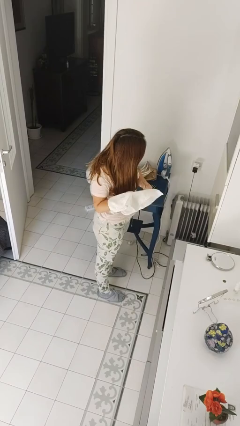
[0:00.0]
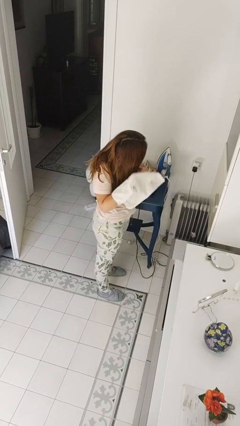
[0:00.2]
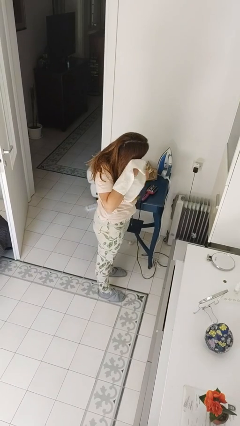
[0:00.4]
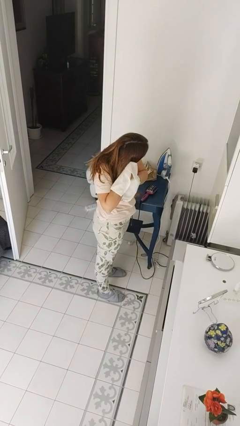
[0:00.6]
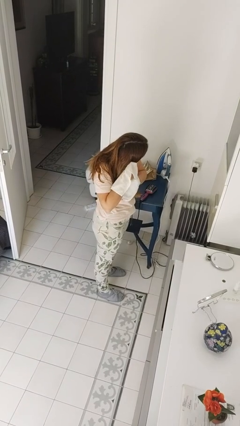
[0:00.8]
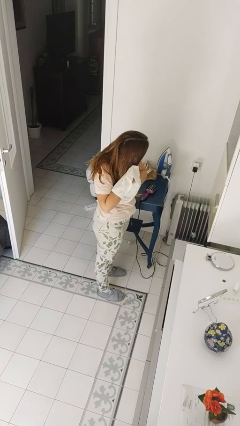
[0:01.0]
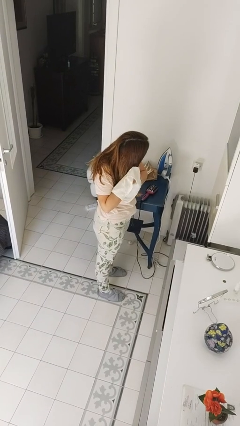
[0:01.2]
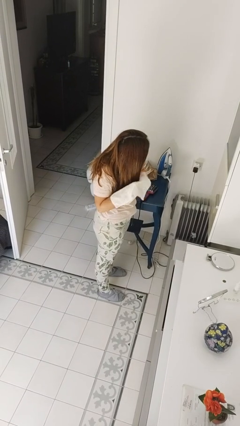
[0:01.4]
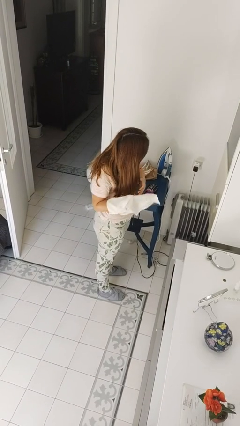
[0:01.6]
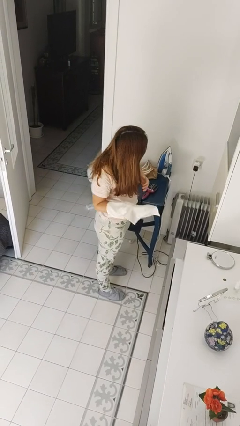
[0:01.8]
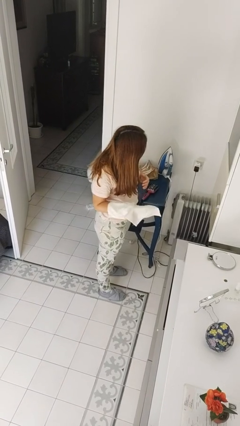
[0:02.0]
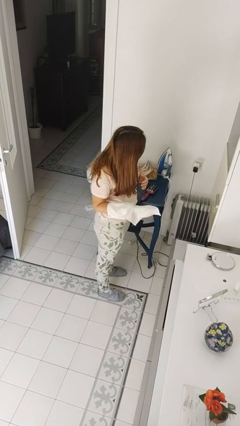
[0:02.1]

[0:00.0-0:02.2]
person dries hair with towel

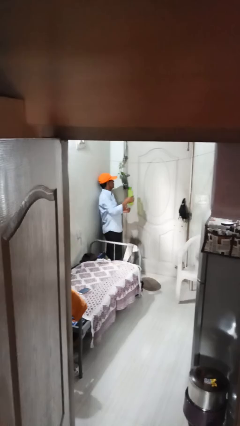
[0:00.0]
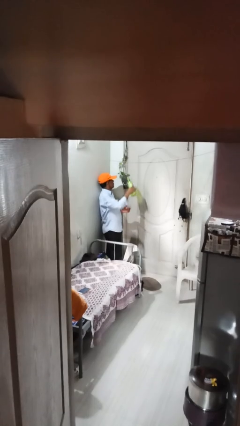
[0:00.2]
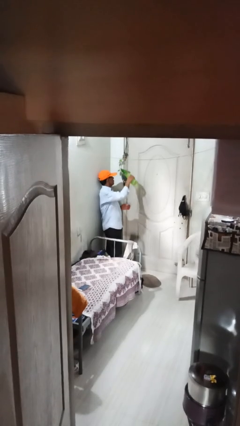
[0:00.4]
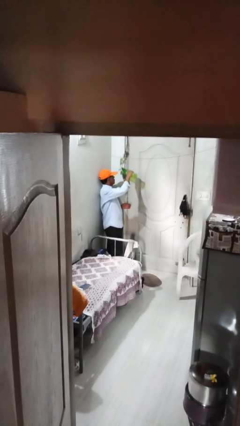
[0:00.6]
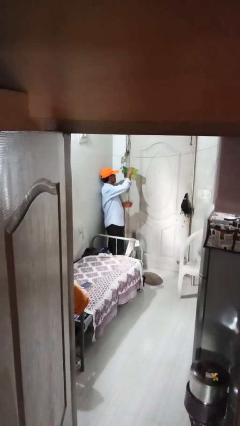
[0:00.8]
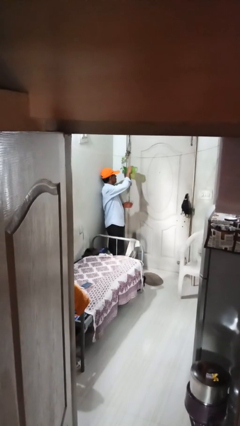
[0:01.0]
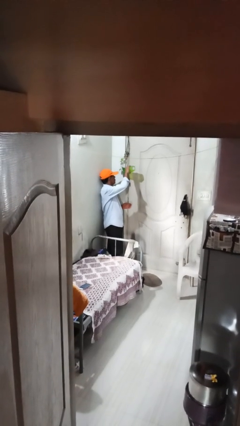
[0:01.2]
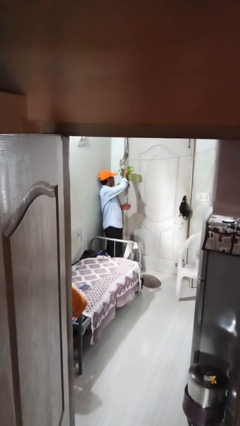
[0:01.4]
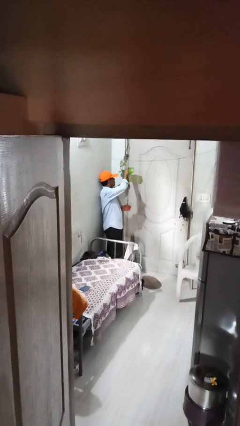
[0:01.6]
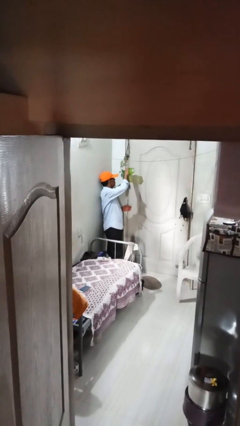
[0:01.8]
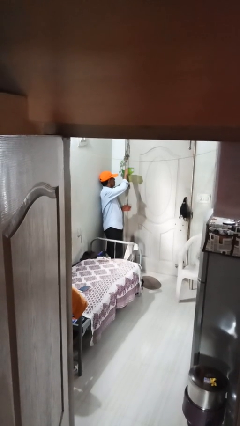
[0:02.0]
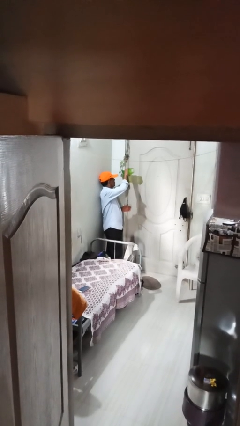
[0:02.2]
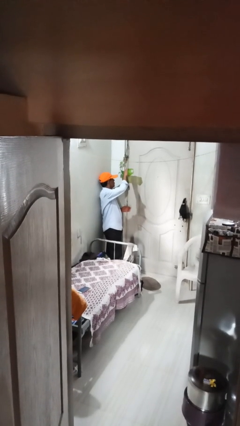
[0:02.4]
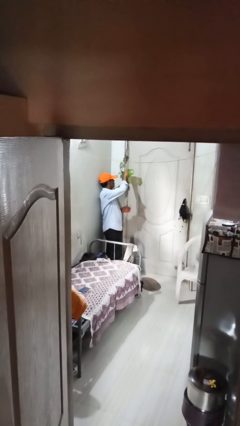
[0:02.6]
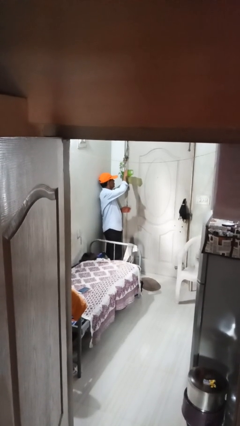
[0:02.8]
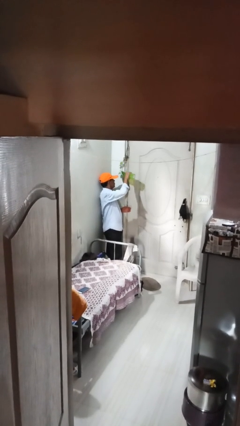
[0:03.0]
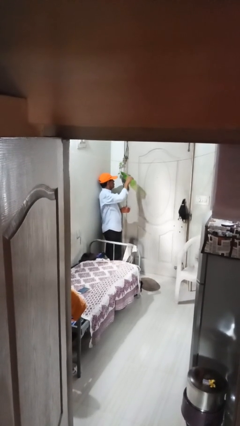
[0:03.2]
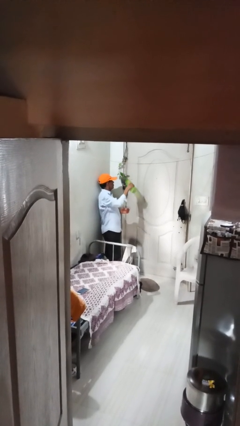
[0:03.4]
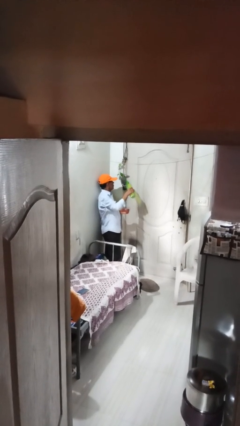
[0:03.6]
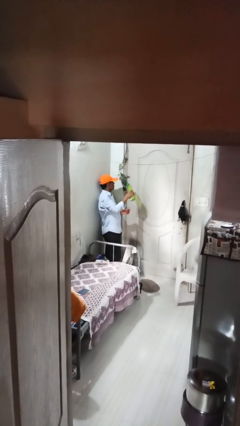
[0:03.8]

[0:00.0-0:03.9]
person waters houseplant

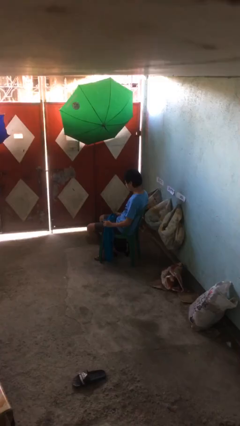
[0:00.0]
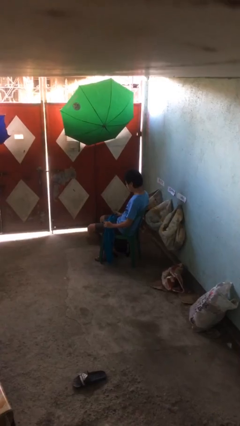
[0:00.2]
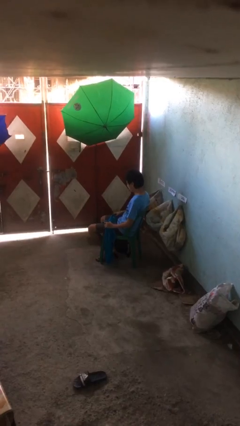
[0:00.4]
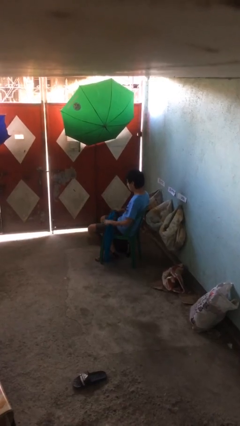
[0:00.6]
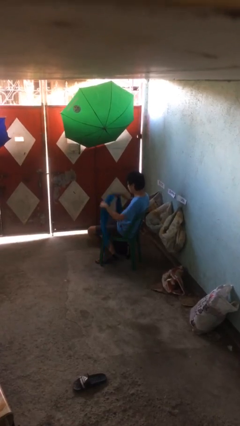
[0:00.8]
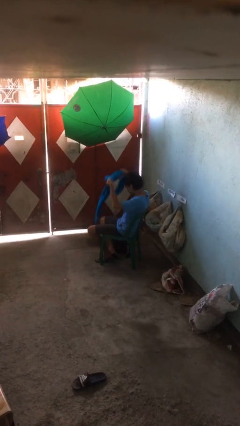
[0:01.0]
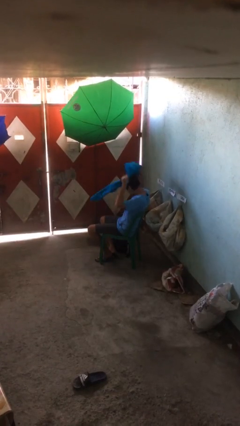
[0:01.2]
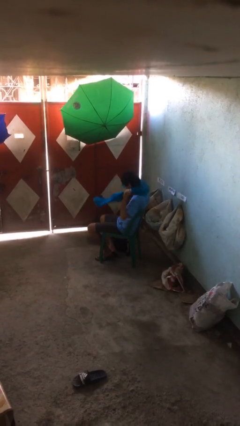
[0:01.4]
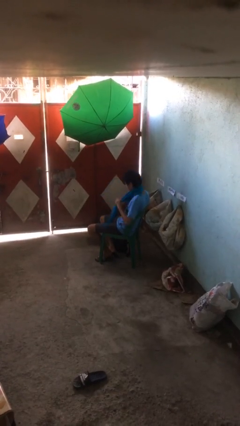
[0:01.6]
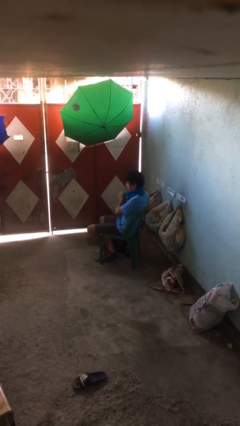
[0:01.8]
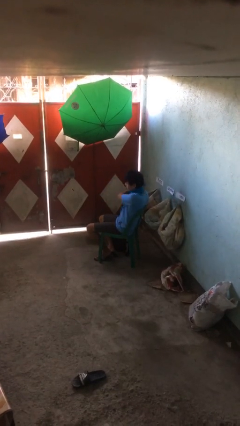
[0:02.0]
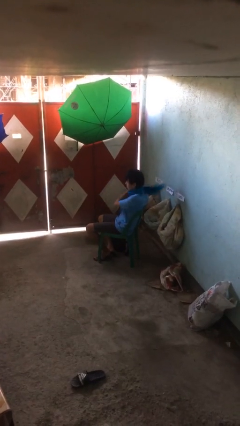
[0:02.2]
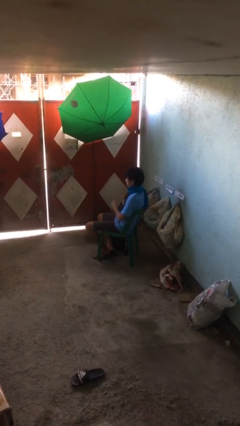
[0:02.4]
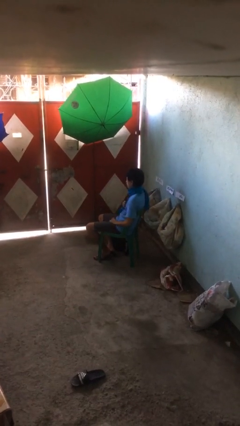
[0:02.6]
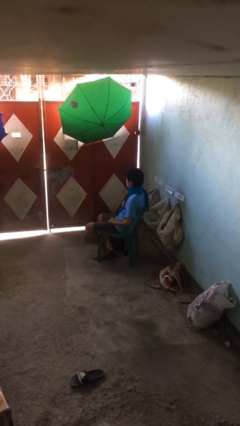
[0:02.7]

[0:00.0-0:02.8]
person puts on scarf

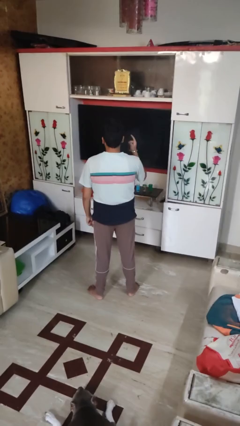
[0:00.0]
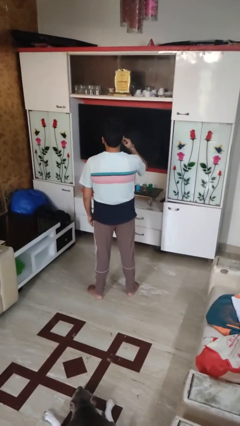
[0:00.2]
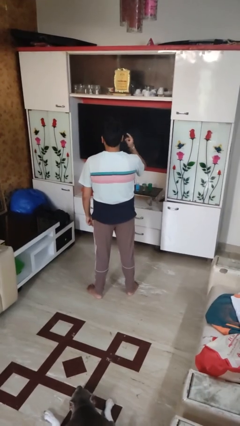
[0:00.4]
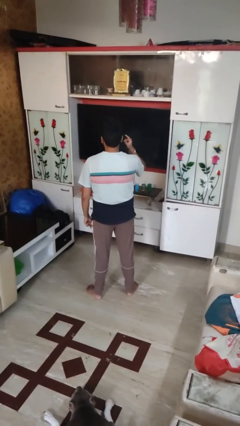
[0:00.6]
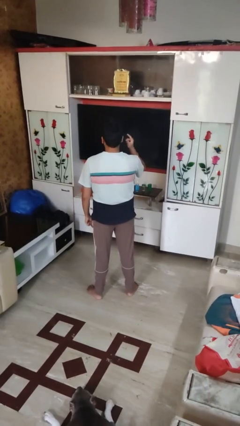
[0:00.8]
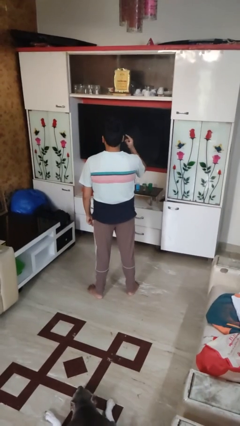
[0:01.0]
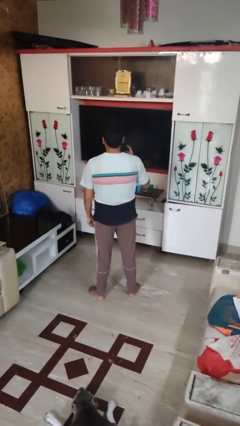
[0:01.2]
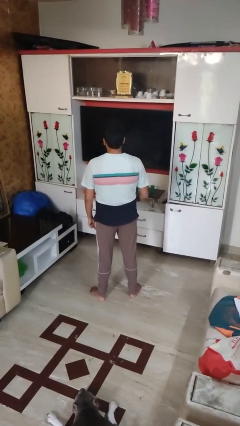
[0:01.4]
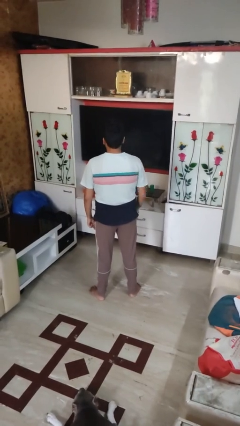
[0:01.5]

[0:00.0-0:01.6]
person gestures listen closely

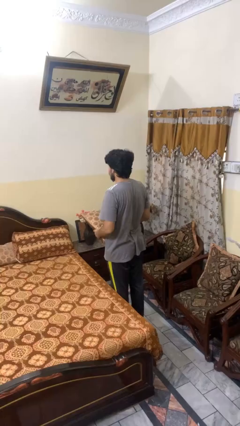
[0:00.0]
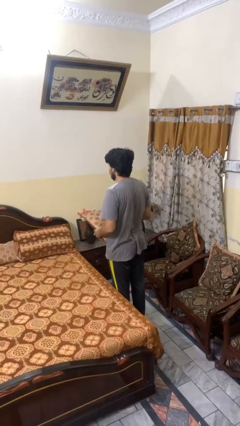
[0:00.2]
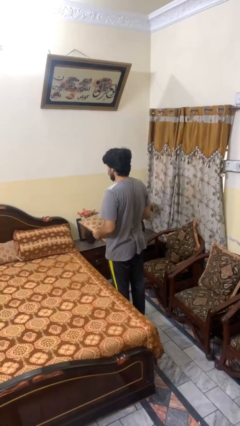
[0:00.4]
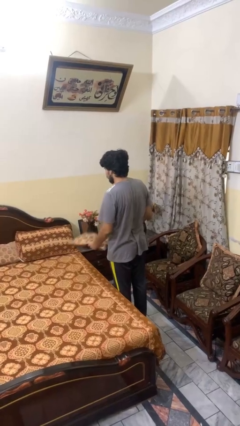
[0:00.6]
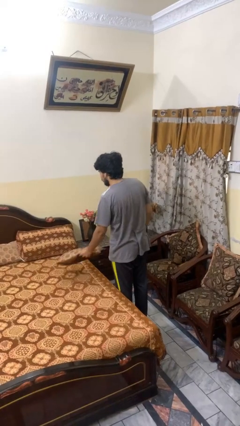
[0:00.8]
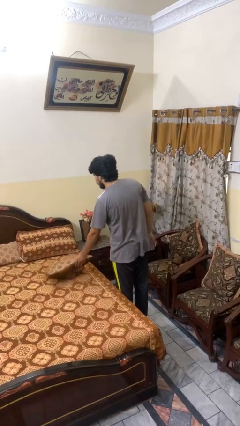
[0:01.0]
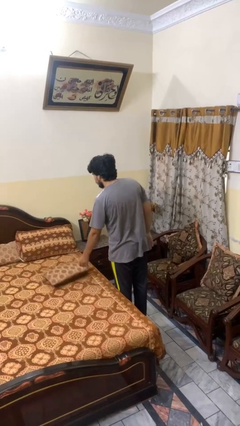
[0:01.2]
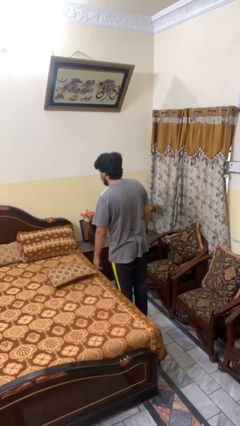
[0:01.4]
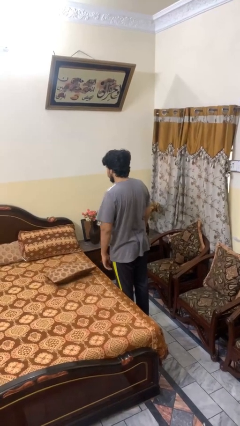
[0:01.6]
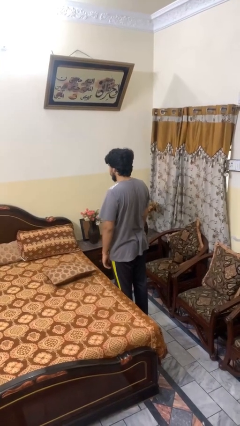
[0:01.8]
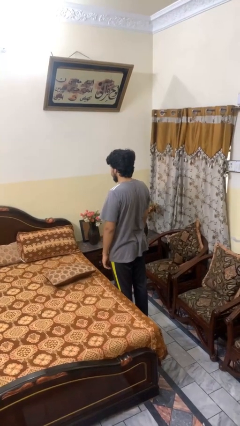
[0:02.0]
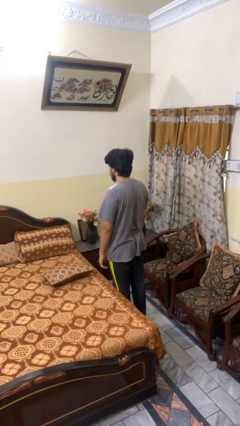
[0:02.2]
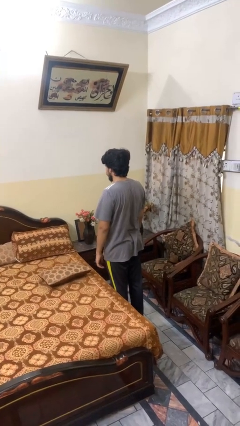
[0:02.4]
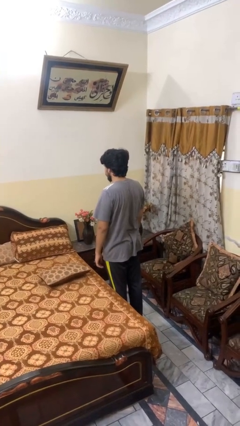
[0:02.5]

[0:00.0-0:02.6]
person puts down object on bed

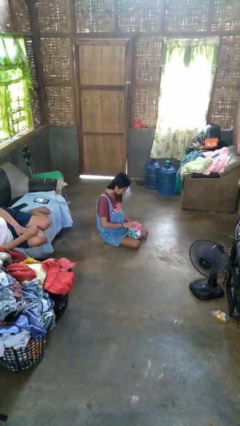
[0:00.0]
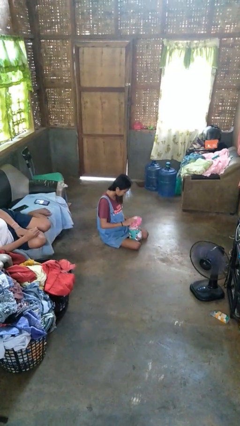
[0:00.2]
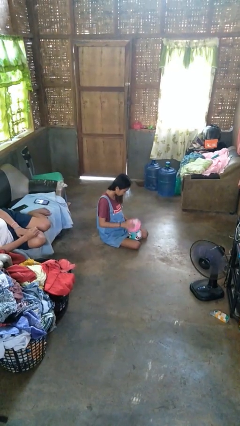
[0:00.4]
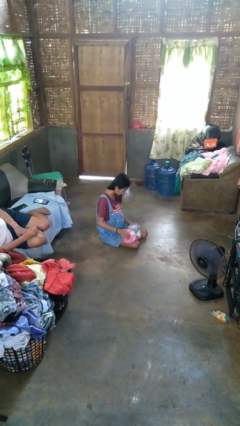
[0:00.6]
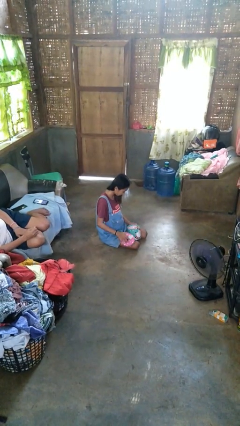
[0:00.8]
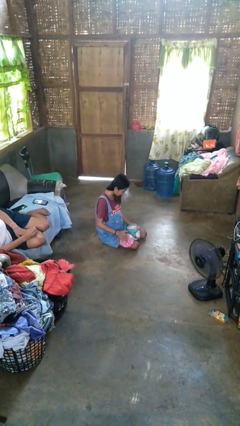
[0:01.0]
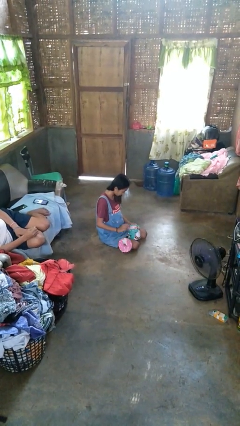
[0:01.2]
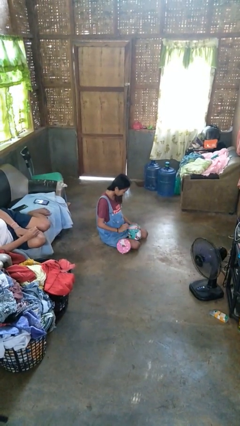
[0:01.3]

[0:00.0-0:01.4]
person opens jewelry box

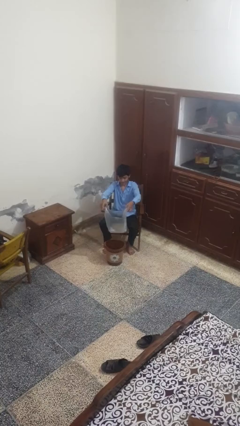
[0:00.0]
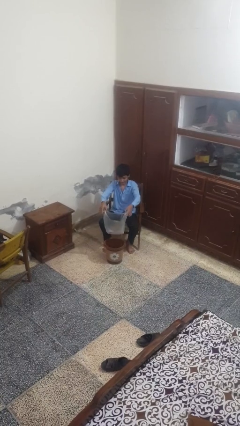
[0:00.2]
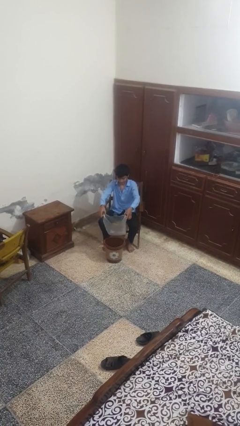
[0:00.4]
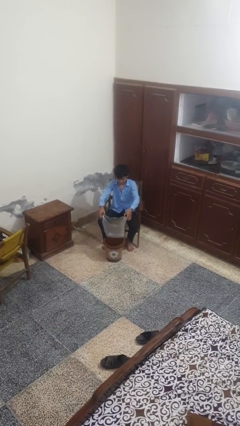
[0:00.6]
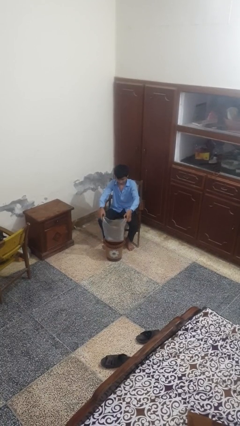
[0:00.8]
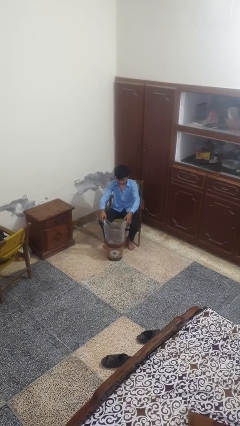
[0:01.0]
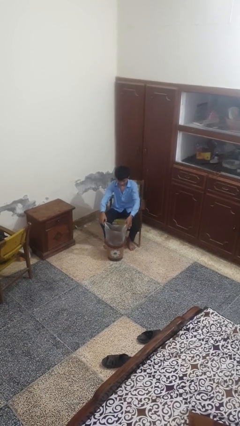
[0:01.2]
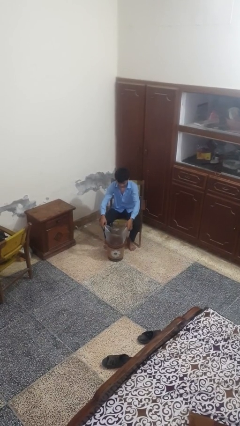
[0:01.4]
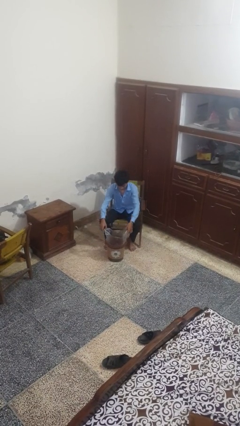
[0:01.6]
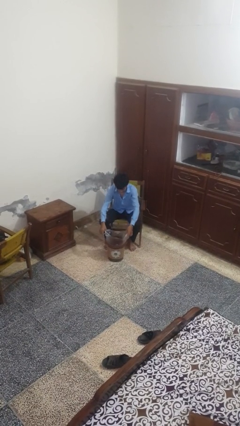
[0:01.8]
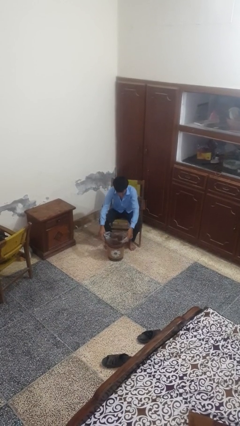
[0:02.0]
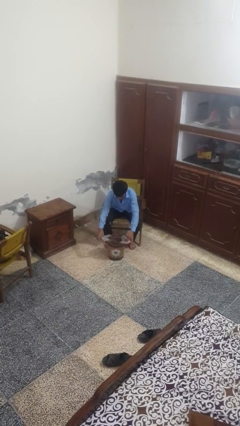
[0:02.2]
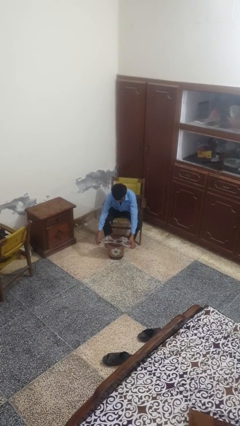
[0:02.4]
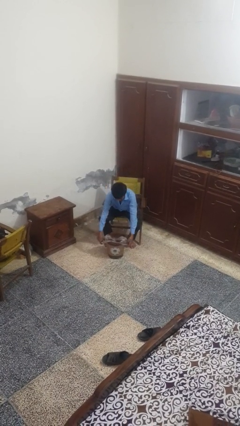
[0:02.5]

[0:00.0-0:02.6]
person inserts trashbag into trashcan
